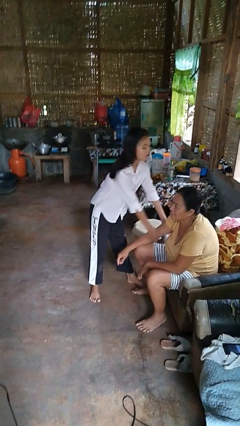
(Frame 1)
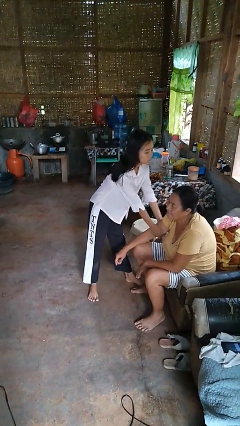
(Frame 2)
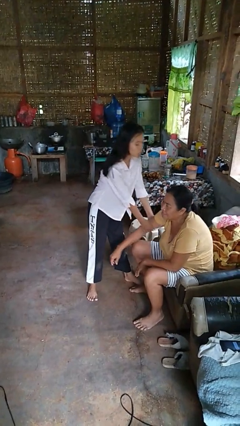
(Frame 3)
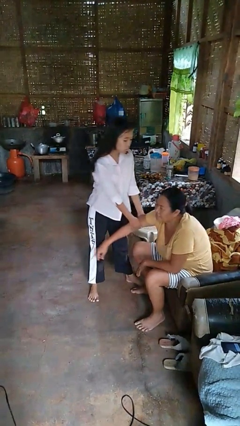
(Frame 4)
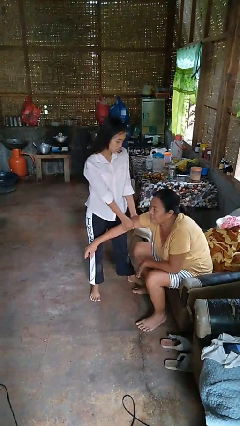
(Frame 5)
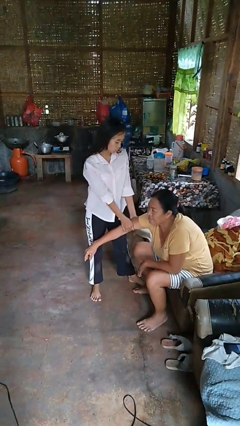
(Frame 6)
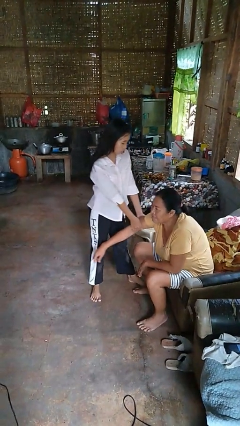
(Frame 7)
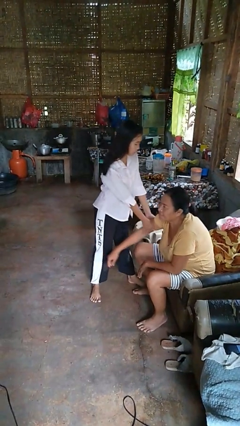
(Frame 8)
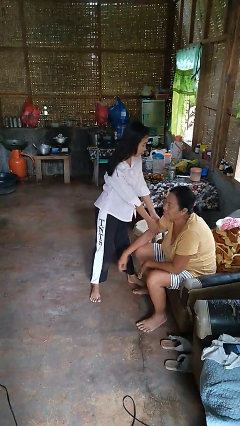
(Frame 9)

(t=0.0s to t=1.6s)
person grabs person by bicep

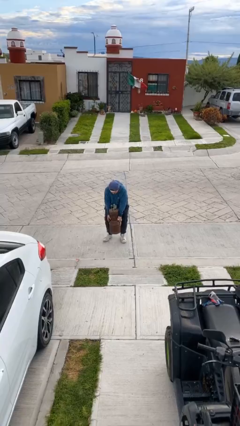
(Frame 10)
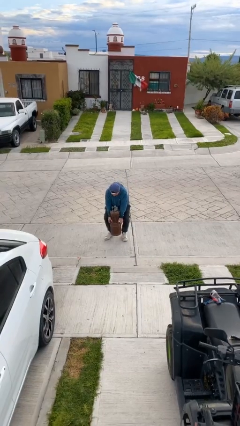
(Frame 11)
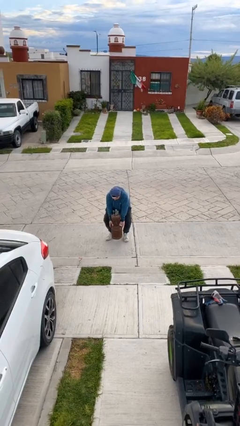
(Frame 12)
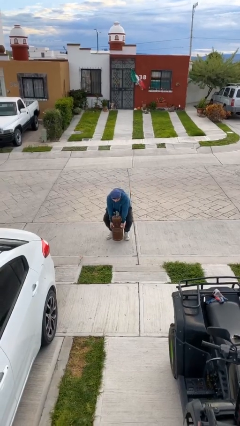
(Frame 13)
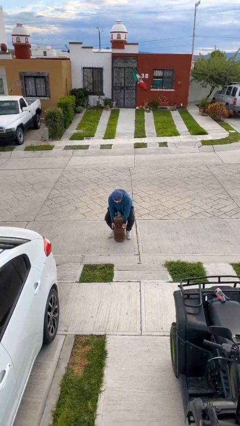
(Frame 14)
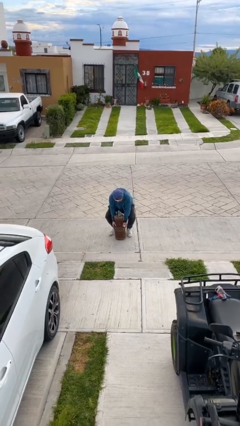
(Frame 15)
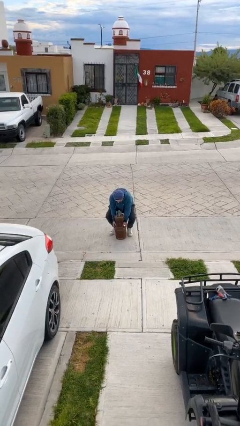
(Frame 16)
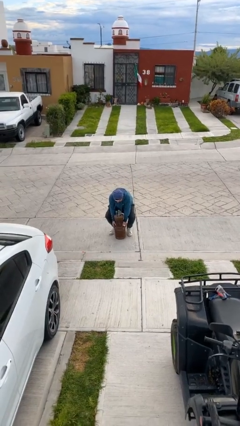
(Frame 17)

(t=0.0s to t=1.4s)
person puts down object on floor

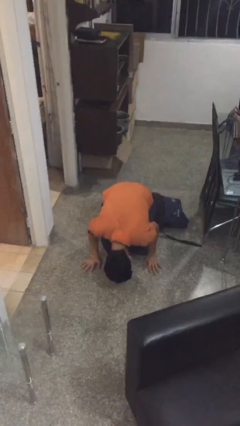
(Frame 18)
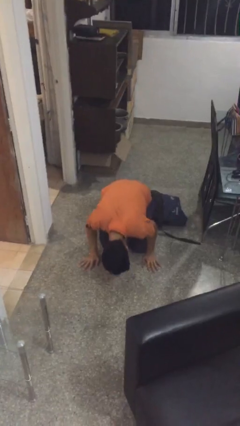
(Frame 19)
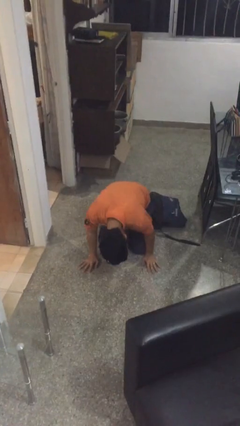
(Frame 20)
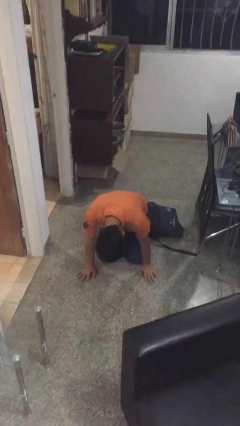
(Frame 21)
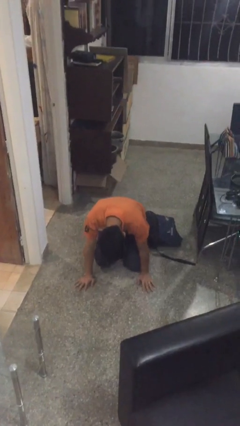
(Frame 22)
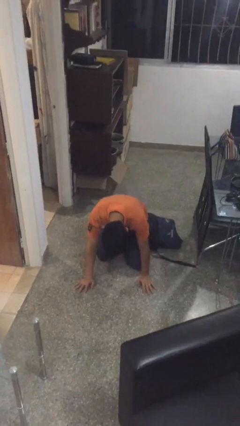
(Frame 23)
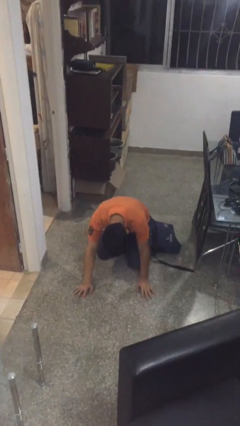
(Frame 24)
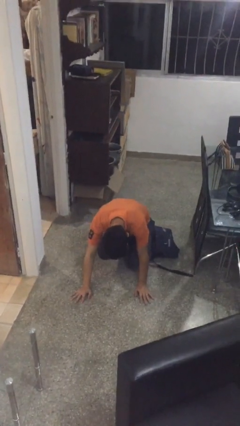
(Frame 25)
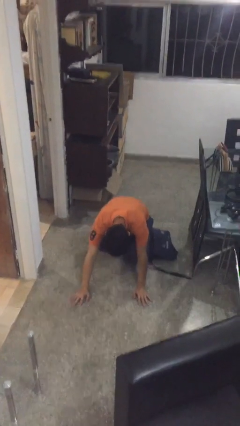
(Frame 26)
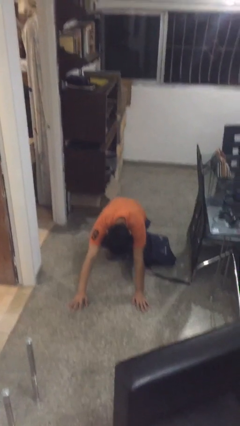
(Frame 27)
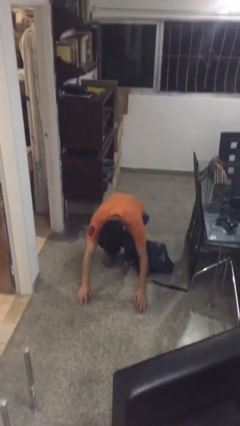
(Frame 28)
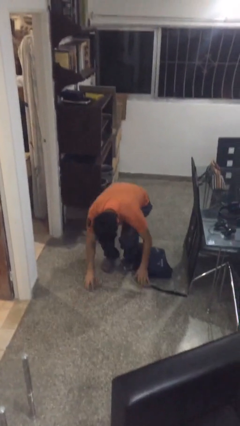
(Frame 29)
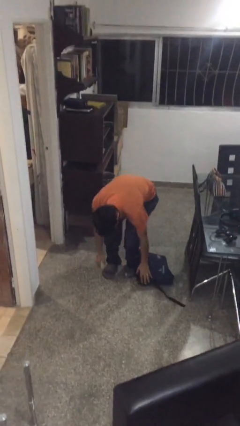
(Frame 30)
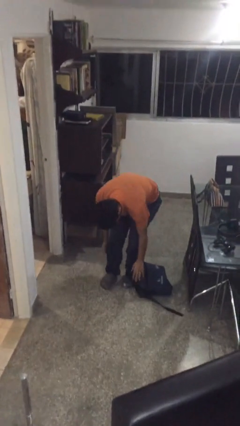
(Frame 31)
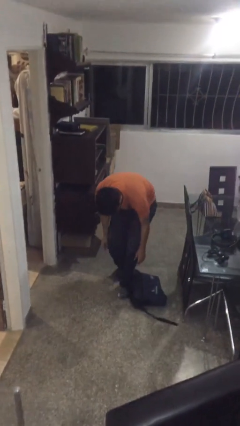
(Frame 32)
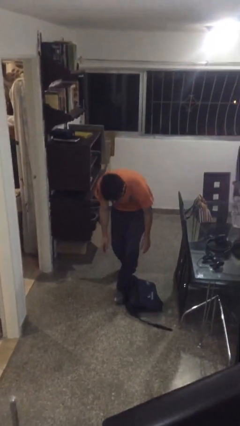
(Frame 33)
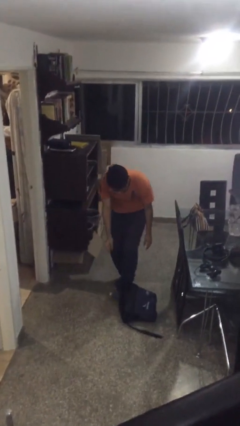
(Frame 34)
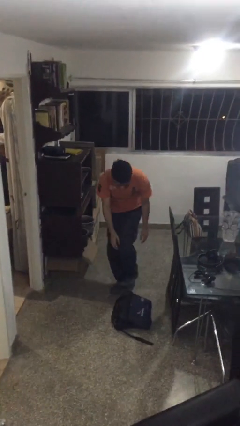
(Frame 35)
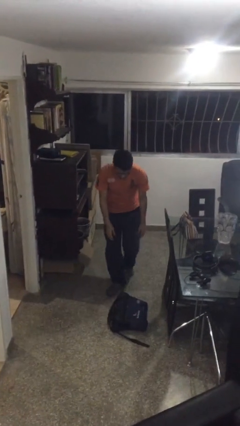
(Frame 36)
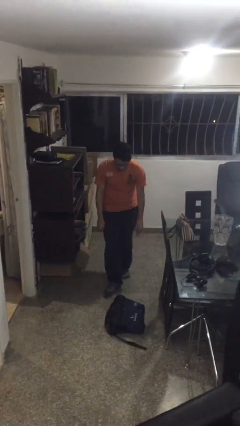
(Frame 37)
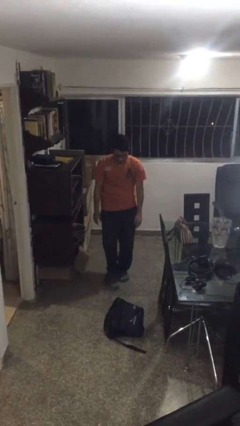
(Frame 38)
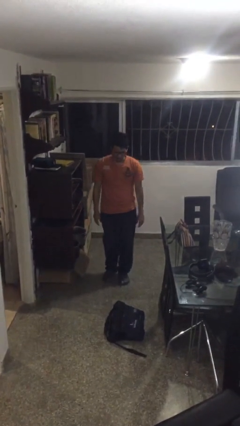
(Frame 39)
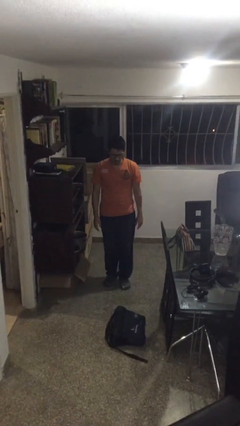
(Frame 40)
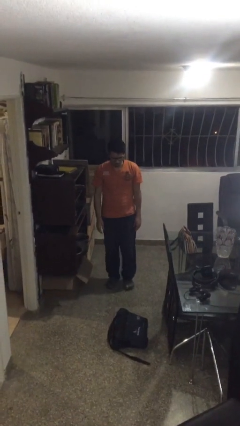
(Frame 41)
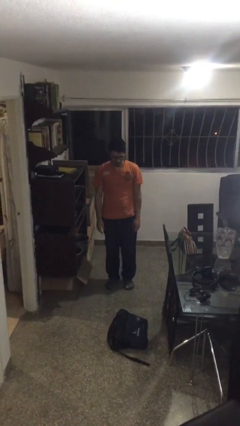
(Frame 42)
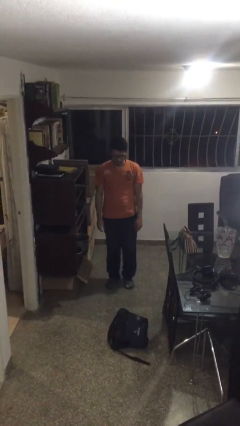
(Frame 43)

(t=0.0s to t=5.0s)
person stands up from floor

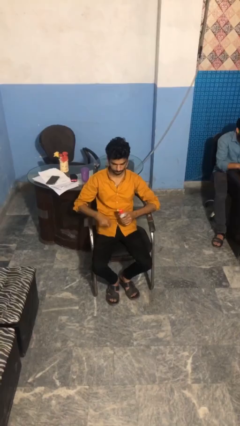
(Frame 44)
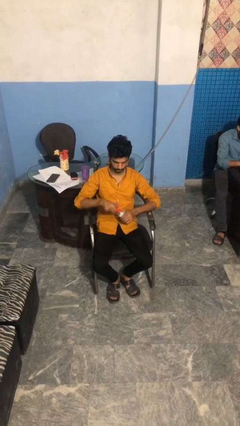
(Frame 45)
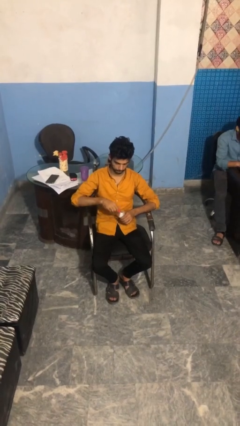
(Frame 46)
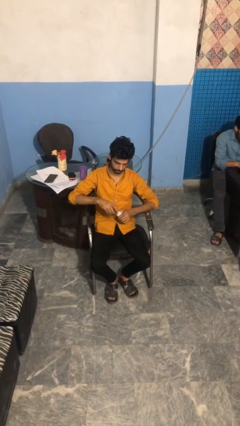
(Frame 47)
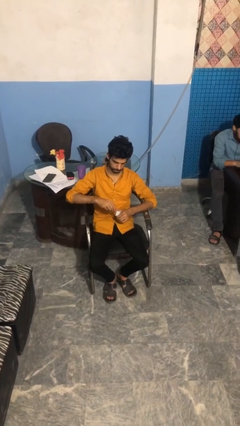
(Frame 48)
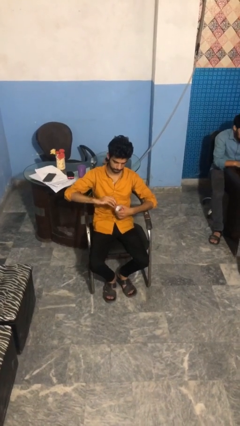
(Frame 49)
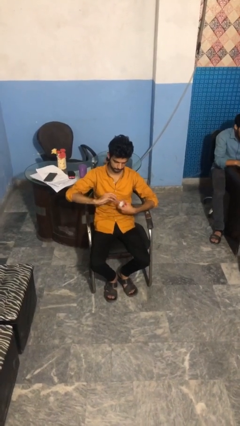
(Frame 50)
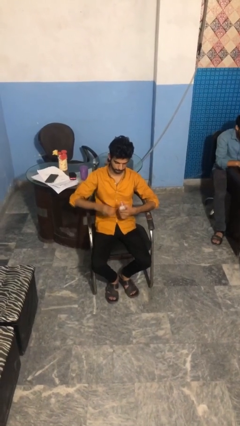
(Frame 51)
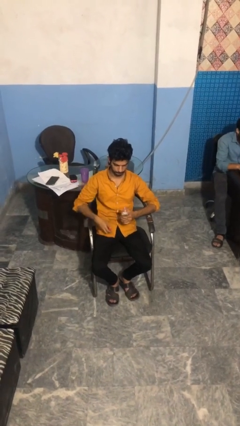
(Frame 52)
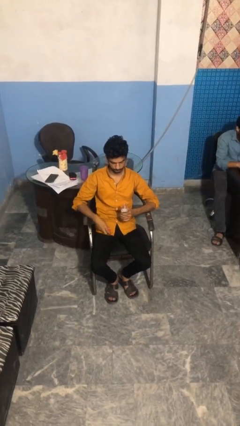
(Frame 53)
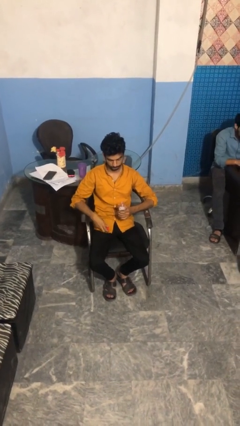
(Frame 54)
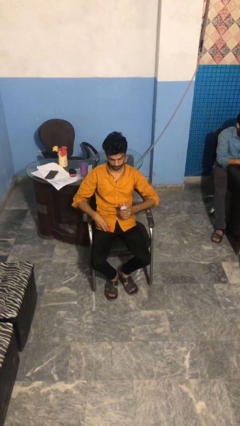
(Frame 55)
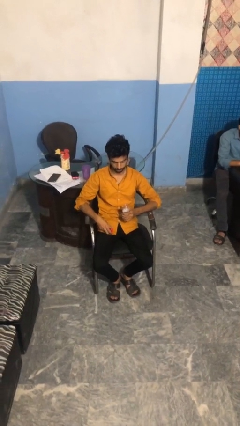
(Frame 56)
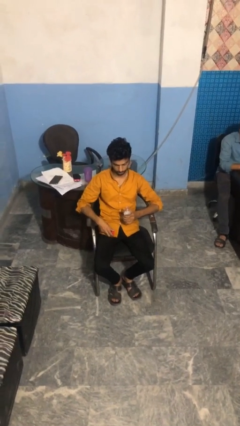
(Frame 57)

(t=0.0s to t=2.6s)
person unscrews lid from bottle

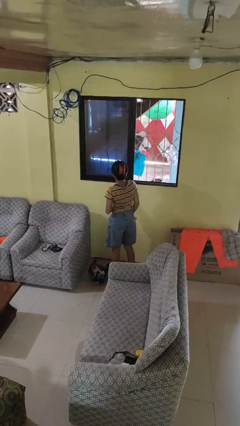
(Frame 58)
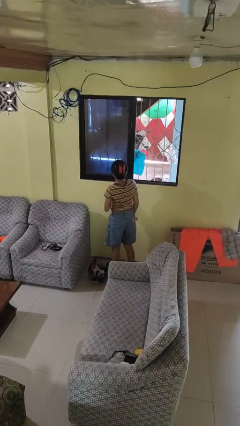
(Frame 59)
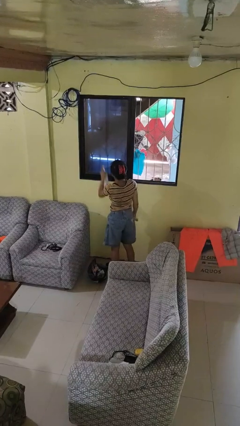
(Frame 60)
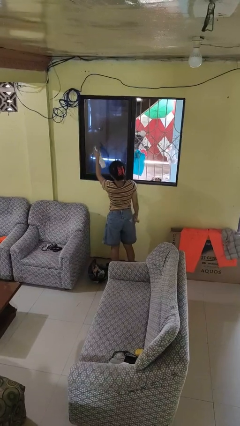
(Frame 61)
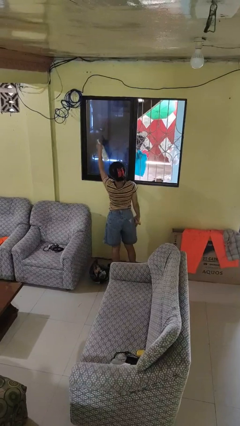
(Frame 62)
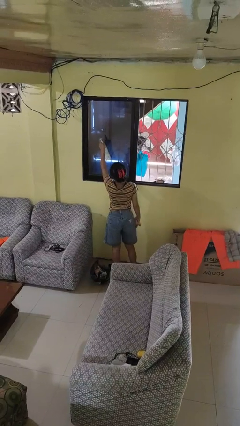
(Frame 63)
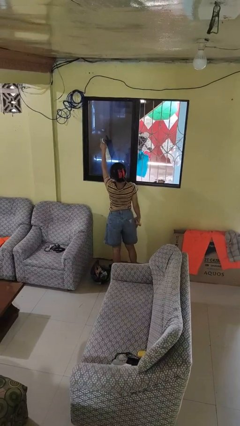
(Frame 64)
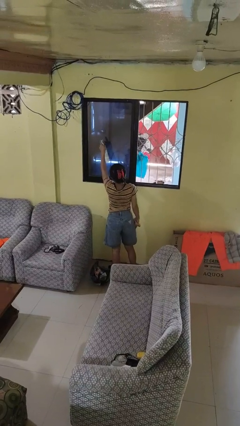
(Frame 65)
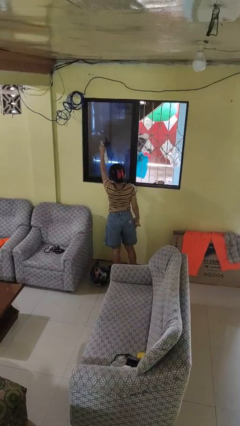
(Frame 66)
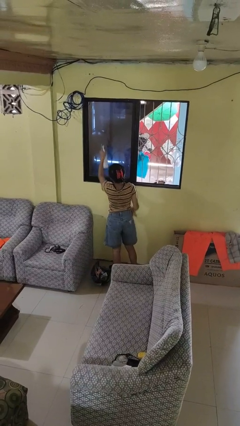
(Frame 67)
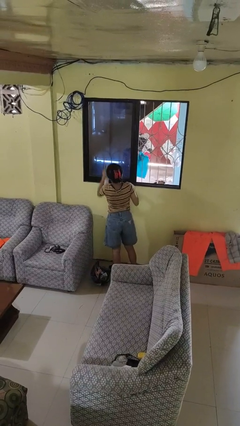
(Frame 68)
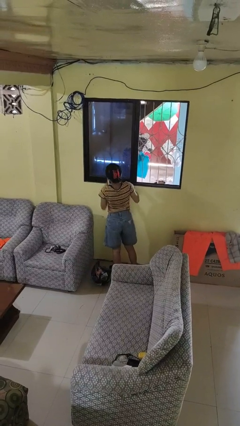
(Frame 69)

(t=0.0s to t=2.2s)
person sprays from bottle

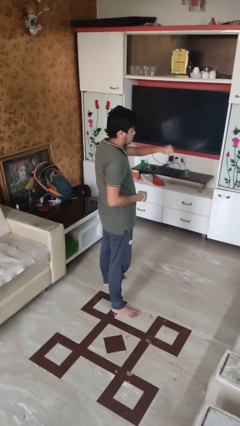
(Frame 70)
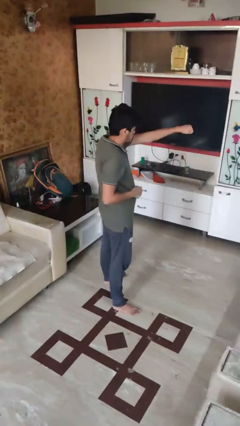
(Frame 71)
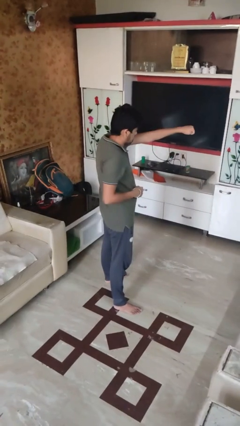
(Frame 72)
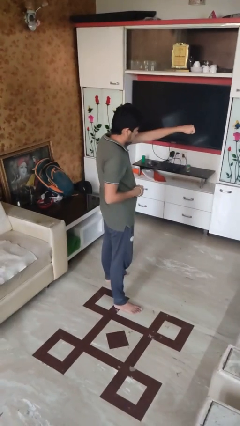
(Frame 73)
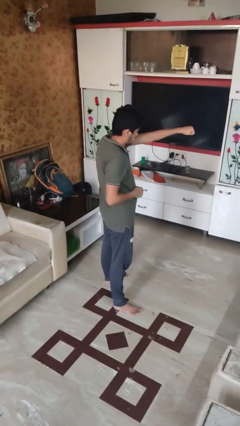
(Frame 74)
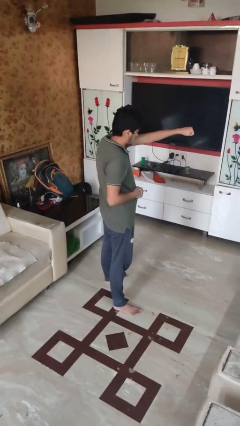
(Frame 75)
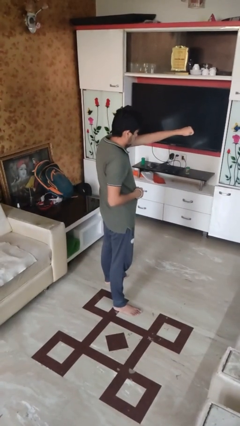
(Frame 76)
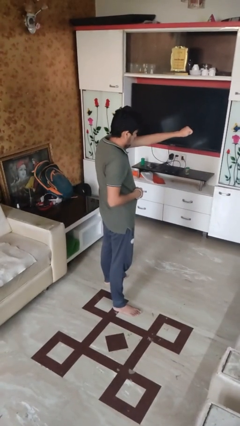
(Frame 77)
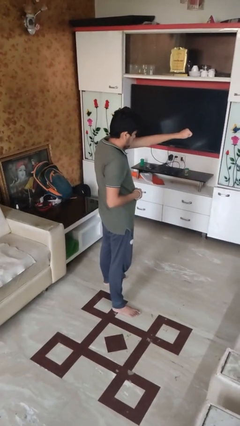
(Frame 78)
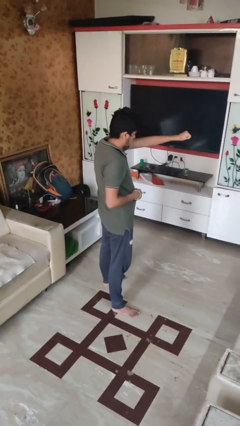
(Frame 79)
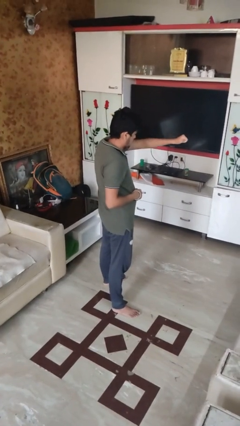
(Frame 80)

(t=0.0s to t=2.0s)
person punches

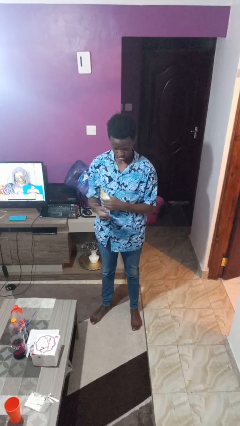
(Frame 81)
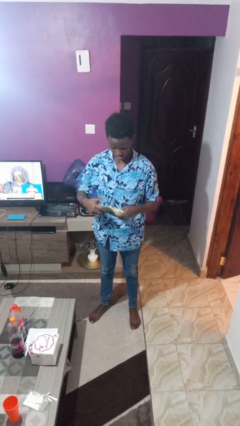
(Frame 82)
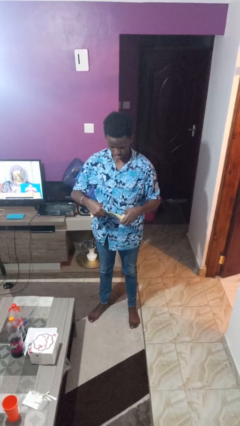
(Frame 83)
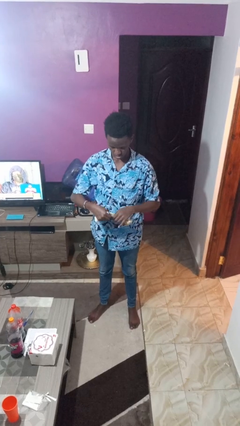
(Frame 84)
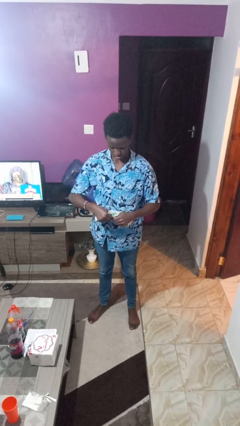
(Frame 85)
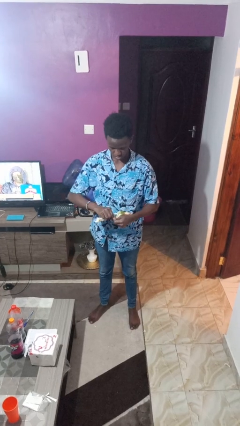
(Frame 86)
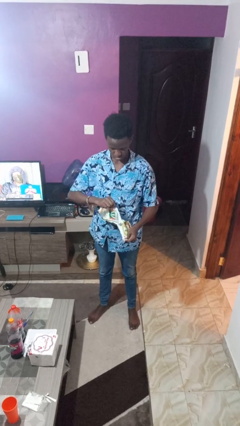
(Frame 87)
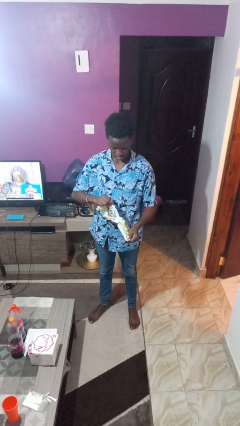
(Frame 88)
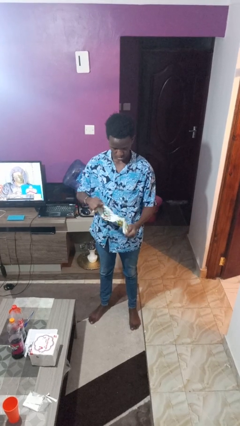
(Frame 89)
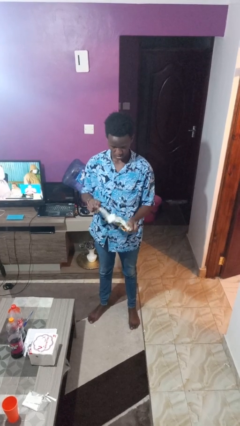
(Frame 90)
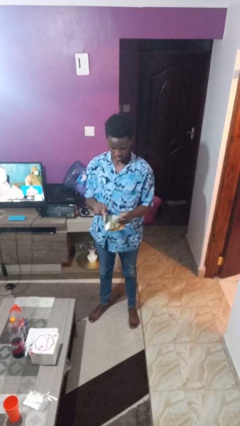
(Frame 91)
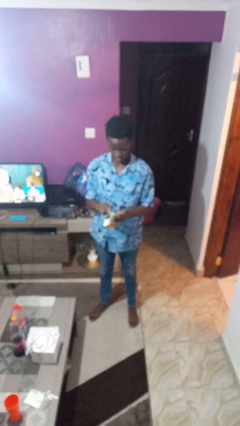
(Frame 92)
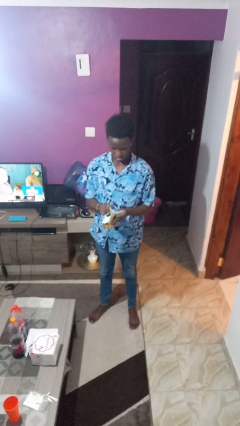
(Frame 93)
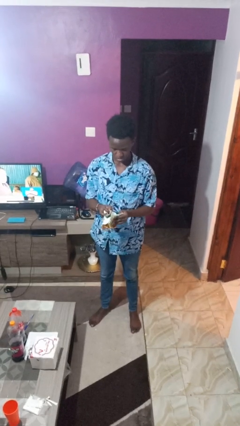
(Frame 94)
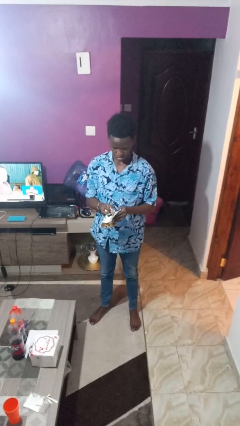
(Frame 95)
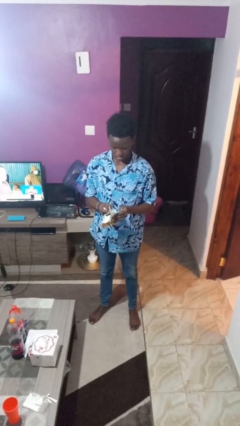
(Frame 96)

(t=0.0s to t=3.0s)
person tears paper
